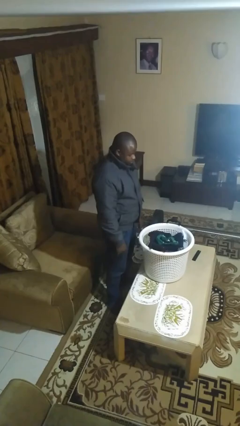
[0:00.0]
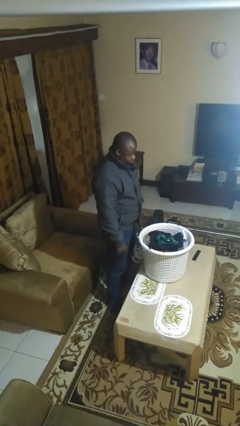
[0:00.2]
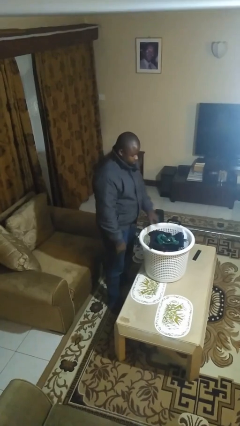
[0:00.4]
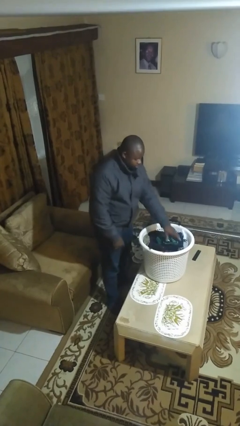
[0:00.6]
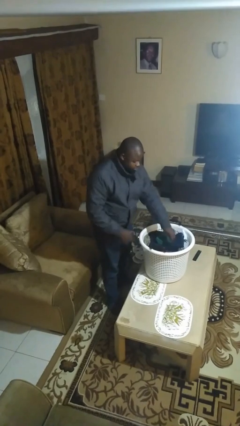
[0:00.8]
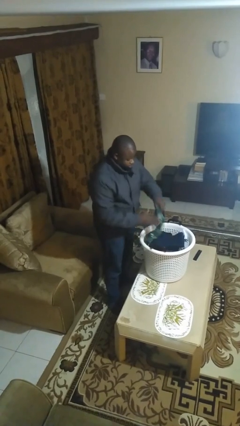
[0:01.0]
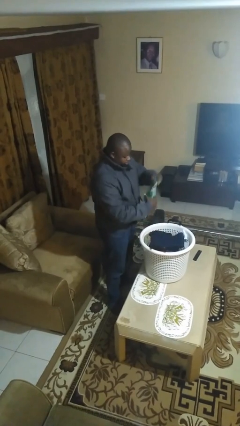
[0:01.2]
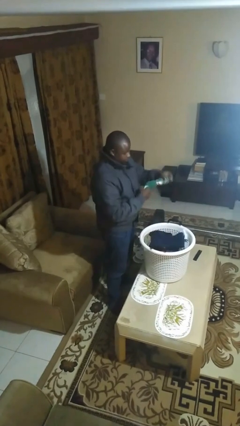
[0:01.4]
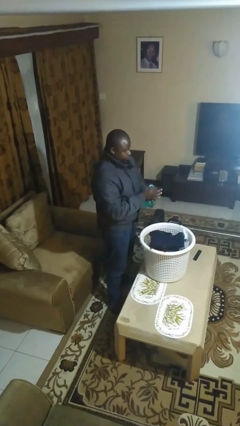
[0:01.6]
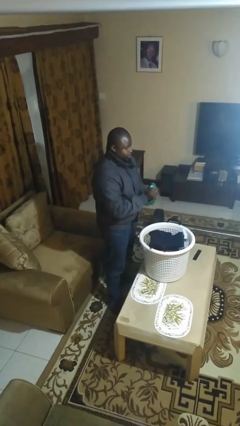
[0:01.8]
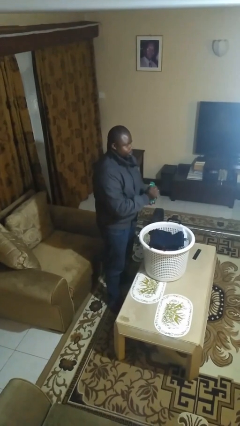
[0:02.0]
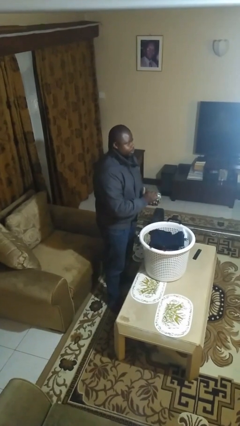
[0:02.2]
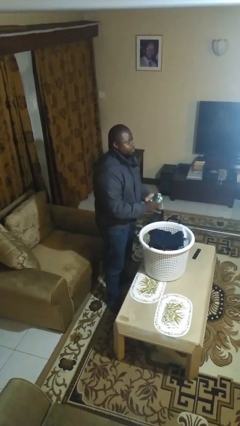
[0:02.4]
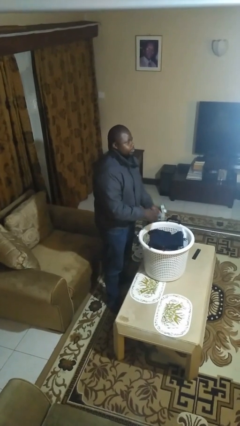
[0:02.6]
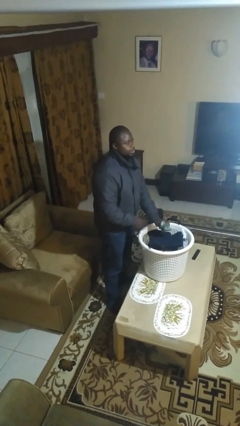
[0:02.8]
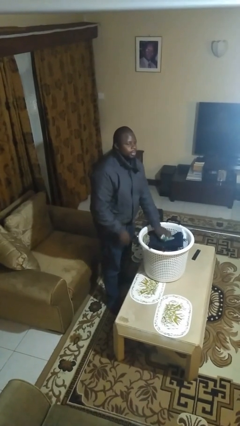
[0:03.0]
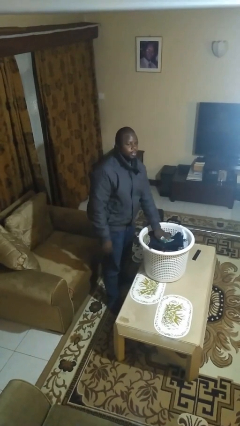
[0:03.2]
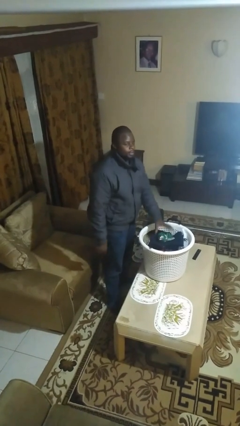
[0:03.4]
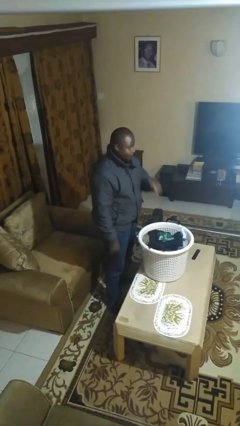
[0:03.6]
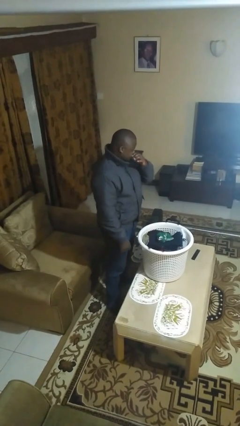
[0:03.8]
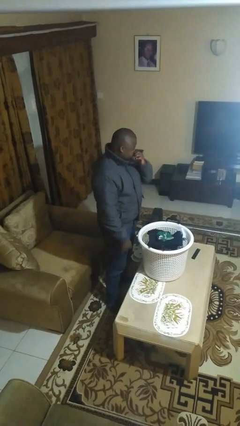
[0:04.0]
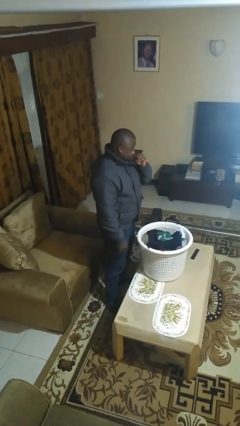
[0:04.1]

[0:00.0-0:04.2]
person folds socks

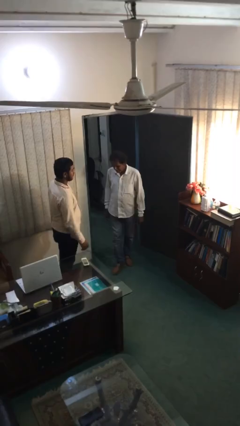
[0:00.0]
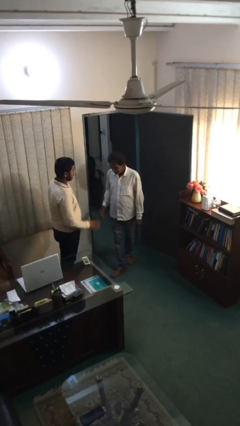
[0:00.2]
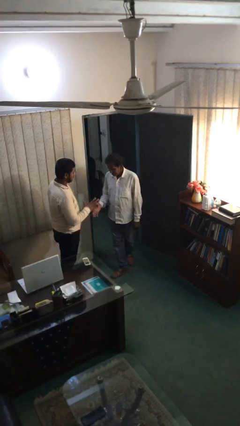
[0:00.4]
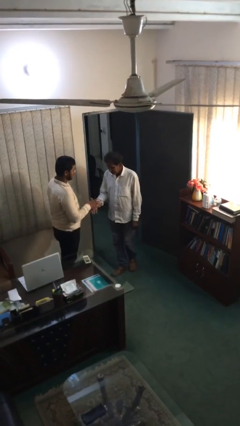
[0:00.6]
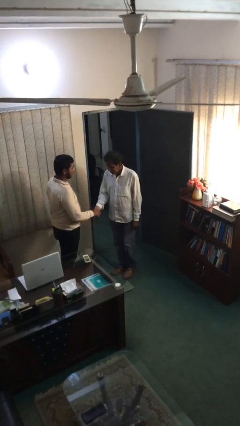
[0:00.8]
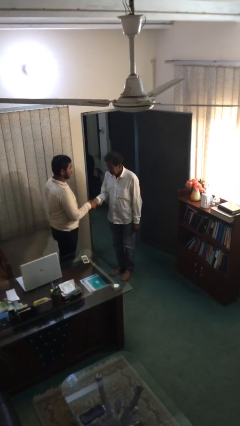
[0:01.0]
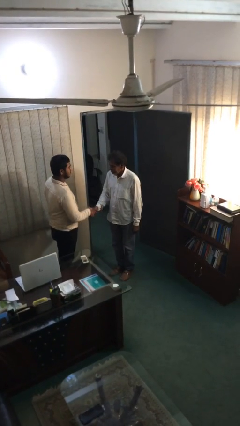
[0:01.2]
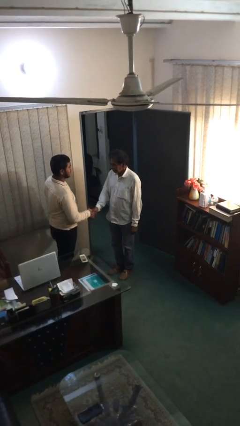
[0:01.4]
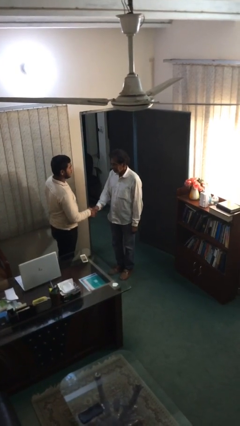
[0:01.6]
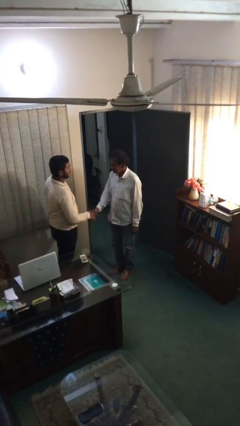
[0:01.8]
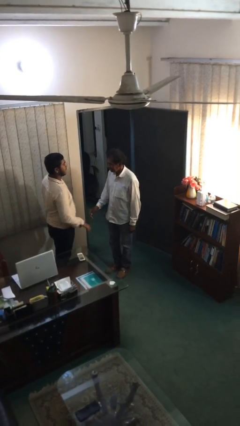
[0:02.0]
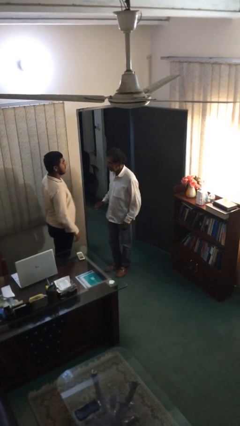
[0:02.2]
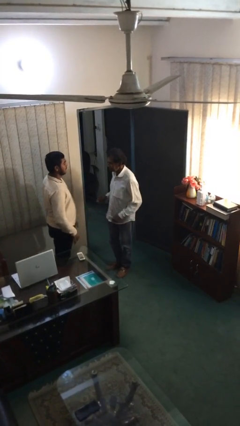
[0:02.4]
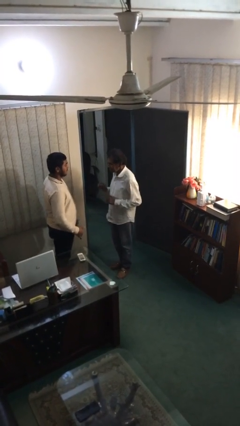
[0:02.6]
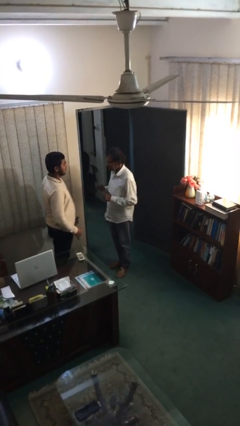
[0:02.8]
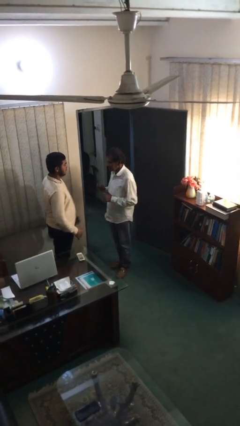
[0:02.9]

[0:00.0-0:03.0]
person shakes hand

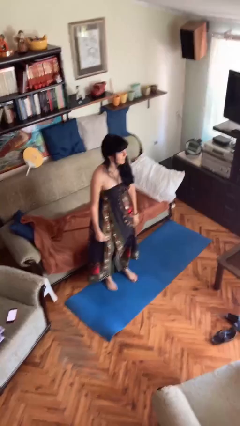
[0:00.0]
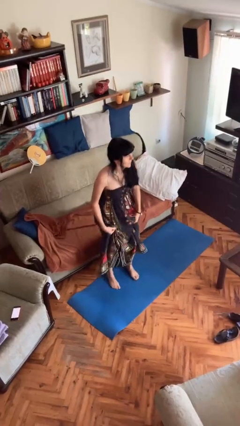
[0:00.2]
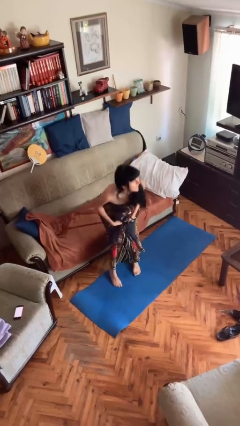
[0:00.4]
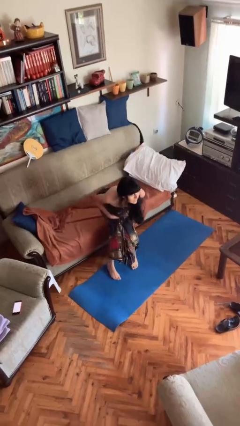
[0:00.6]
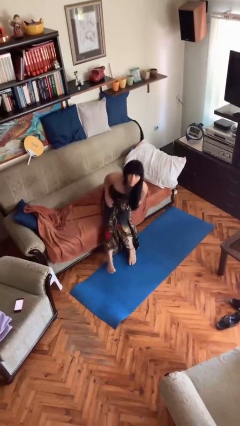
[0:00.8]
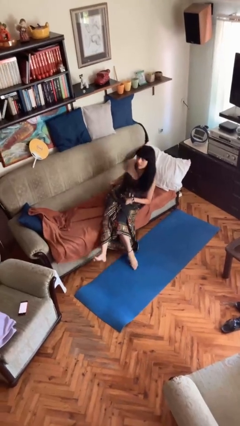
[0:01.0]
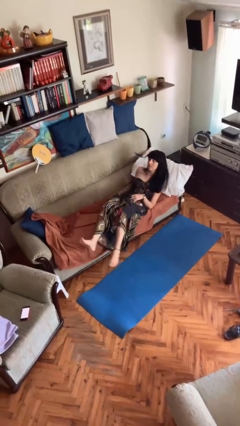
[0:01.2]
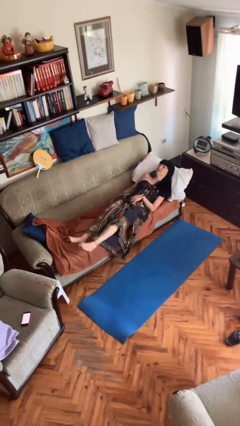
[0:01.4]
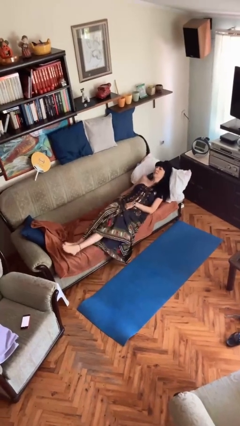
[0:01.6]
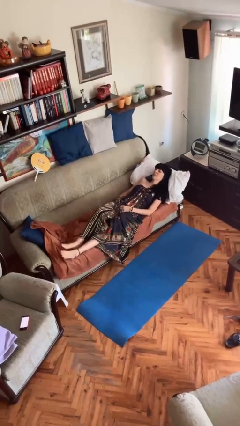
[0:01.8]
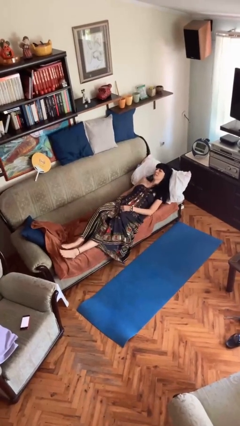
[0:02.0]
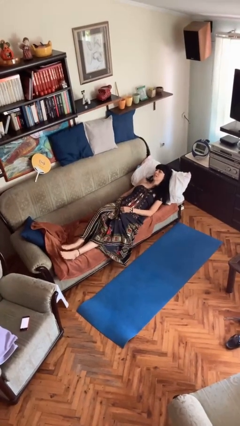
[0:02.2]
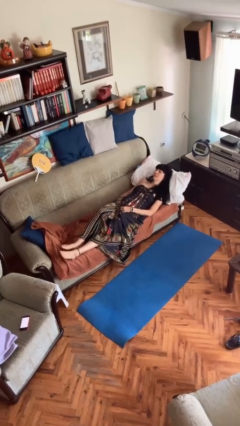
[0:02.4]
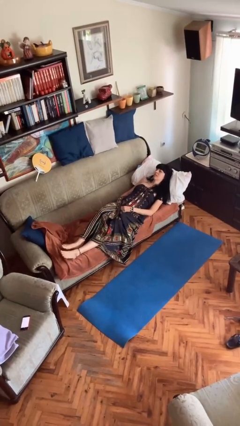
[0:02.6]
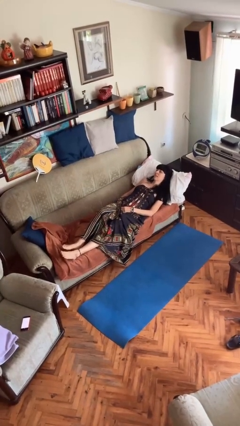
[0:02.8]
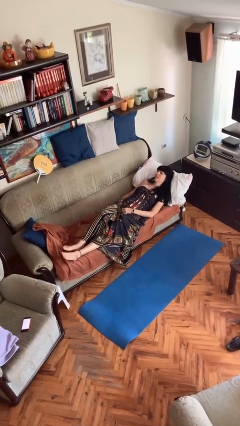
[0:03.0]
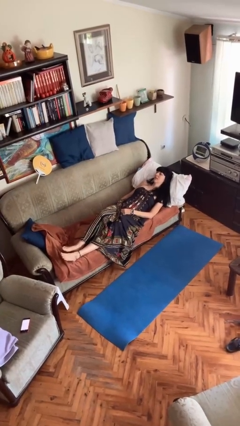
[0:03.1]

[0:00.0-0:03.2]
person lies down on bed

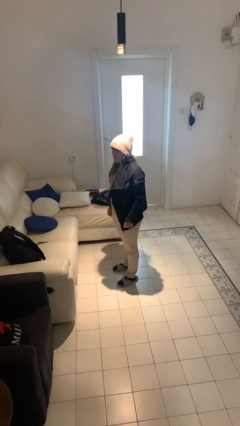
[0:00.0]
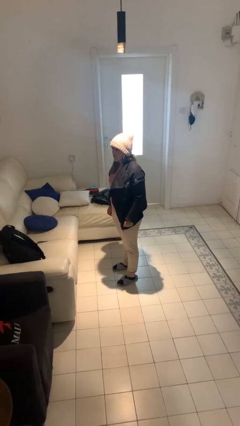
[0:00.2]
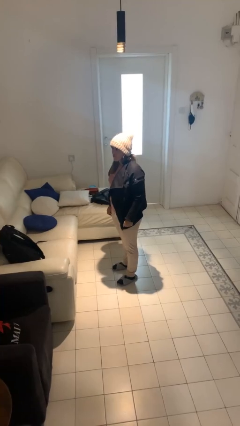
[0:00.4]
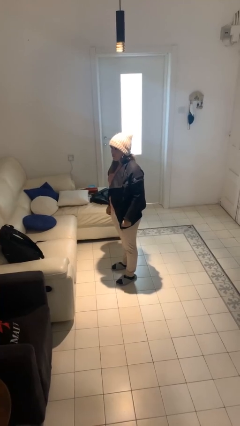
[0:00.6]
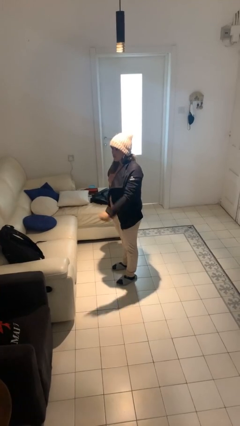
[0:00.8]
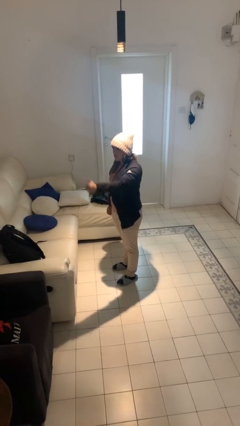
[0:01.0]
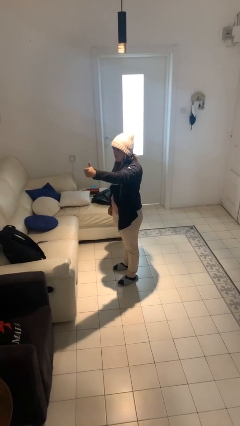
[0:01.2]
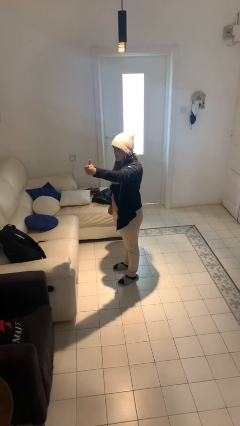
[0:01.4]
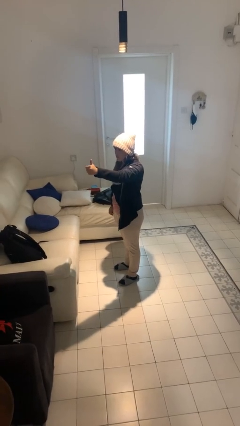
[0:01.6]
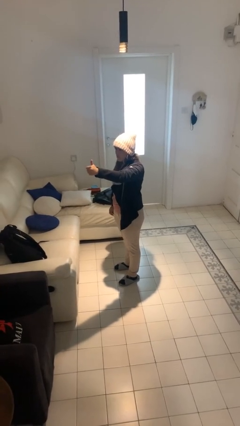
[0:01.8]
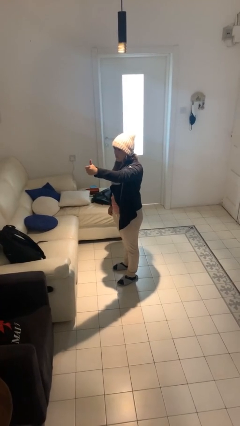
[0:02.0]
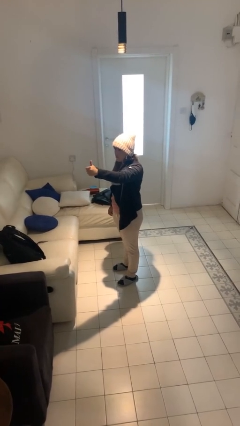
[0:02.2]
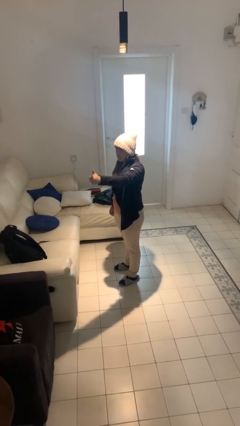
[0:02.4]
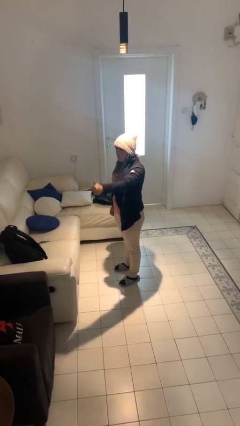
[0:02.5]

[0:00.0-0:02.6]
person gestures thumbs up

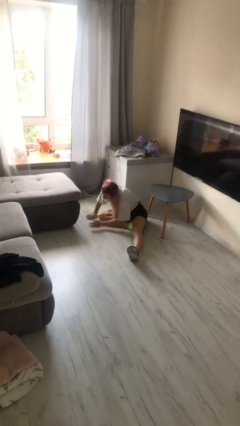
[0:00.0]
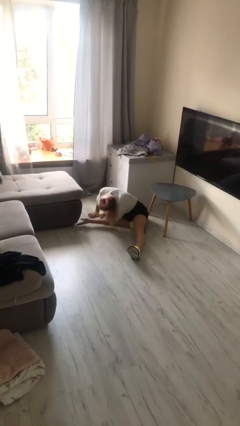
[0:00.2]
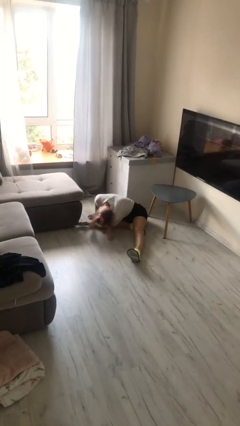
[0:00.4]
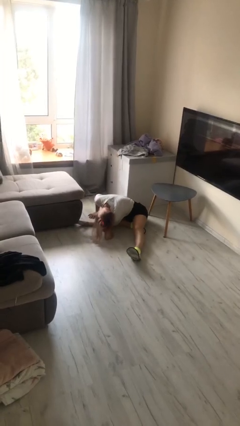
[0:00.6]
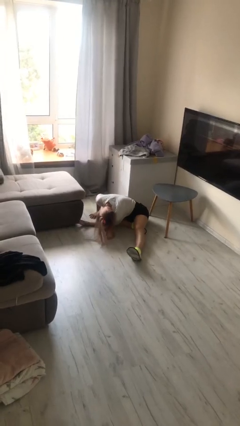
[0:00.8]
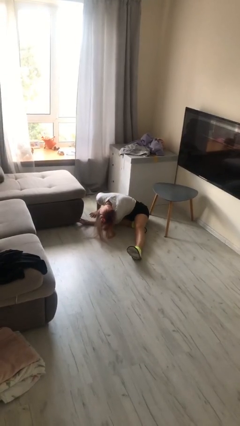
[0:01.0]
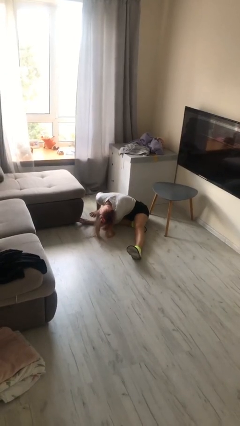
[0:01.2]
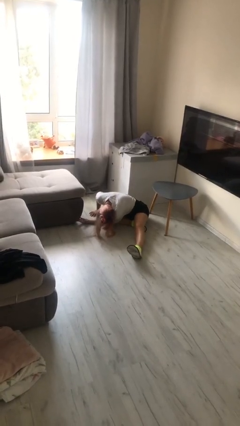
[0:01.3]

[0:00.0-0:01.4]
person searches under couch

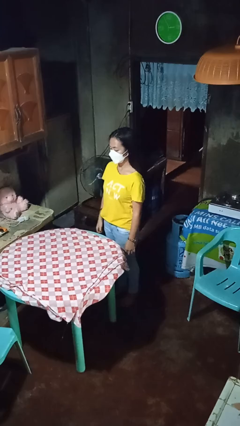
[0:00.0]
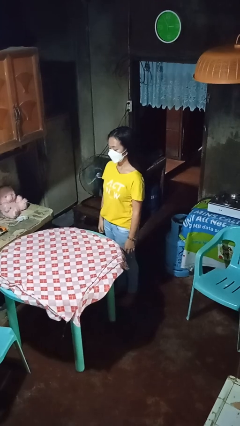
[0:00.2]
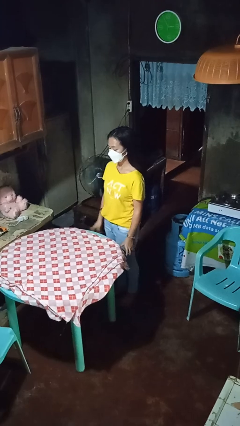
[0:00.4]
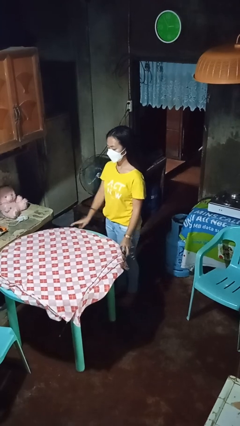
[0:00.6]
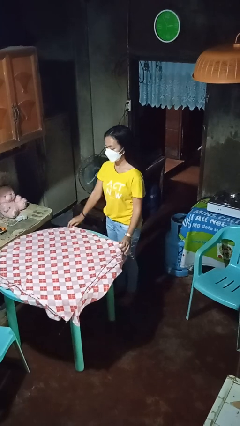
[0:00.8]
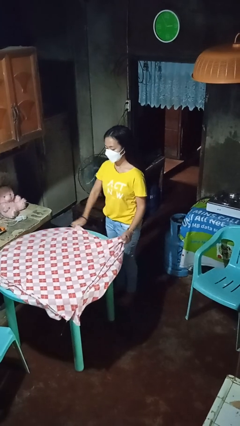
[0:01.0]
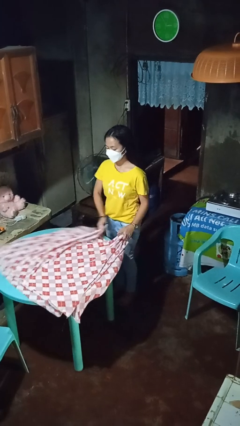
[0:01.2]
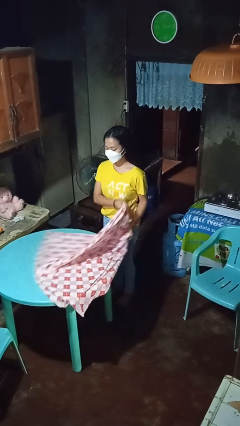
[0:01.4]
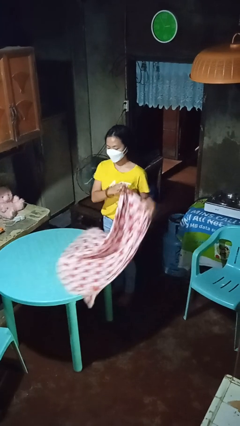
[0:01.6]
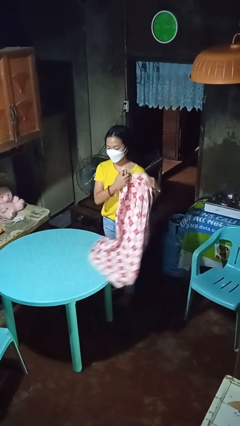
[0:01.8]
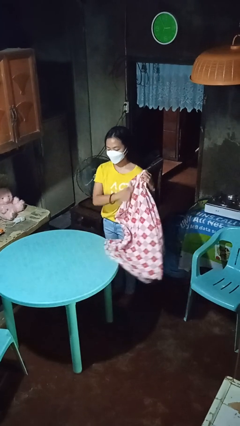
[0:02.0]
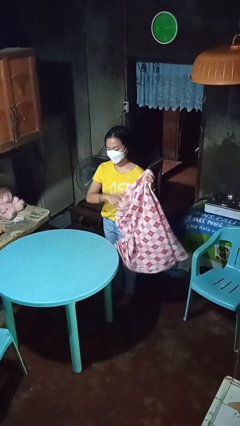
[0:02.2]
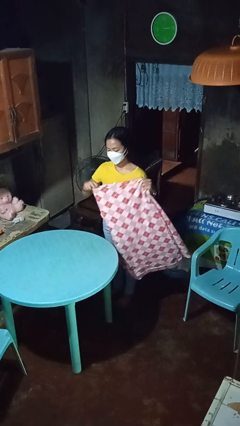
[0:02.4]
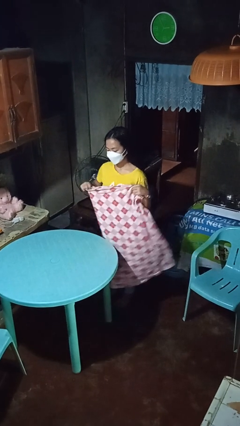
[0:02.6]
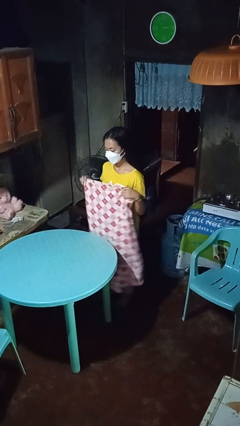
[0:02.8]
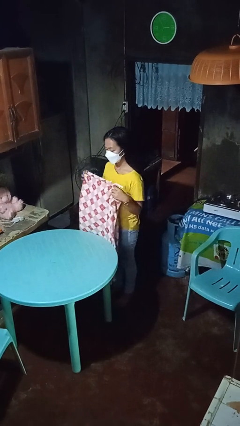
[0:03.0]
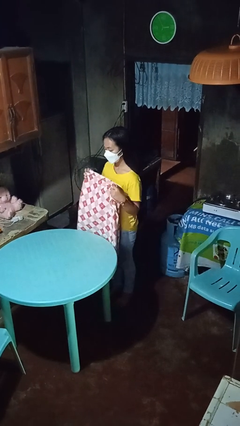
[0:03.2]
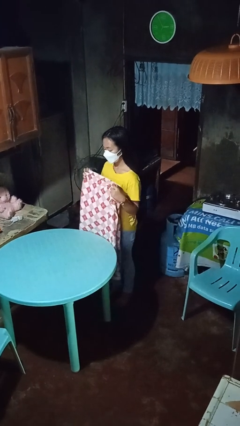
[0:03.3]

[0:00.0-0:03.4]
person folds tablecloth
